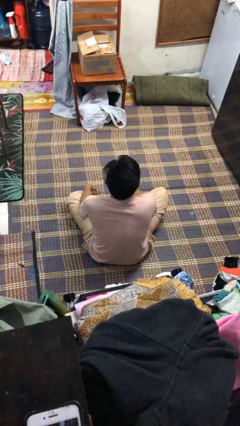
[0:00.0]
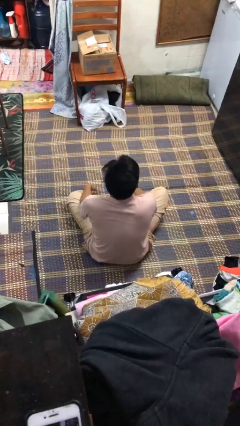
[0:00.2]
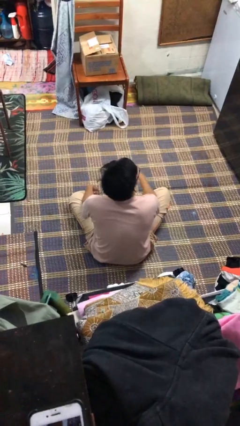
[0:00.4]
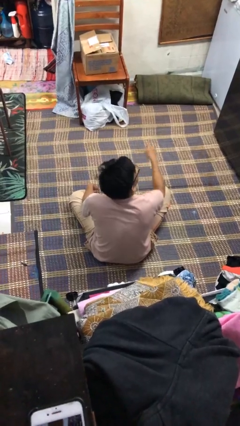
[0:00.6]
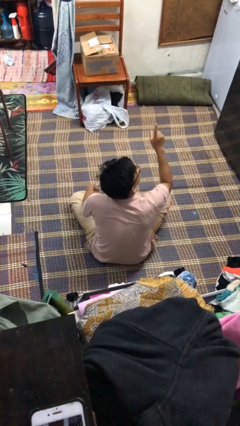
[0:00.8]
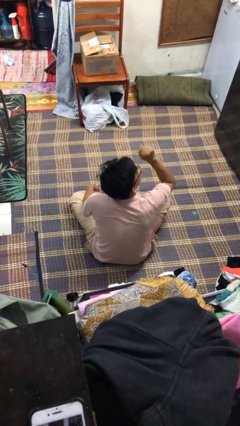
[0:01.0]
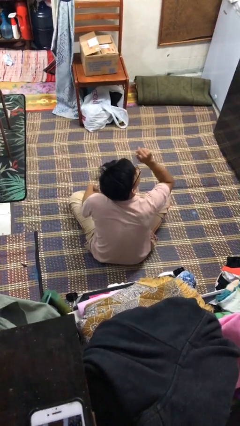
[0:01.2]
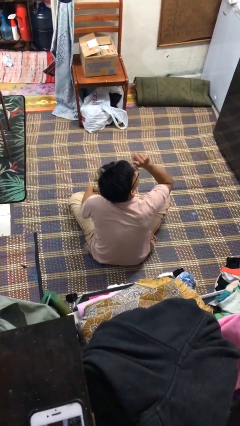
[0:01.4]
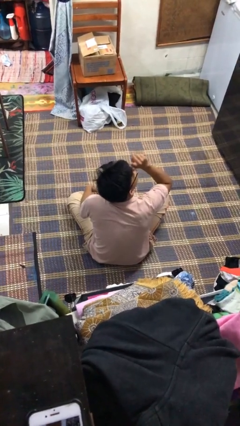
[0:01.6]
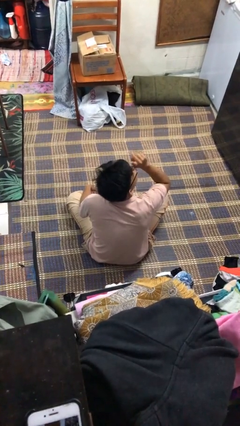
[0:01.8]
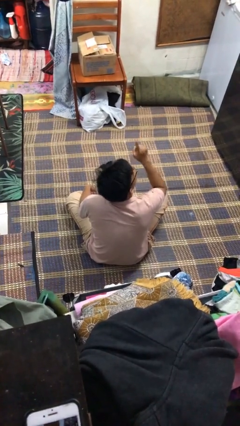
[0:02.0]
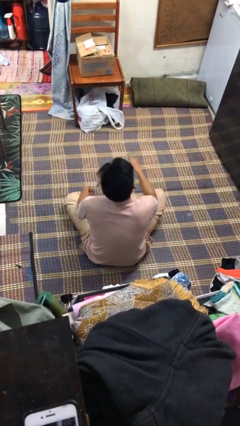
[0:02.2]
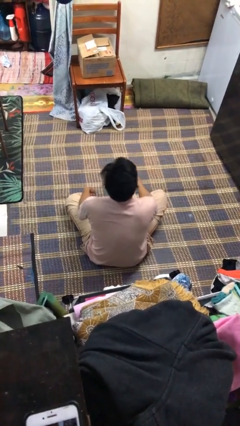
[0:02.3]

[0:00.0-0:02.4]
person gestures be quiet

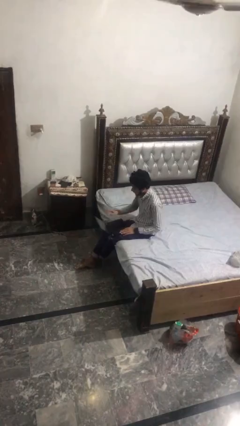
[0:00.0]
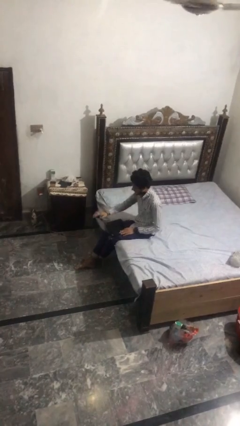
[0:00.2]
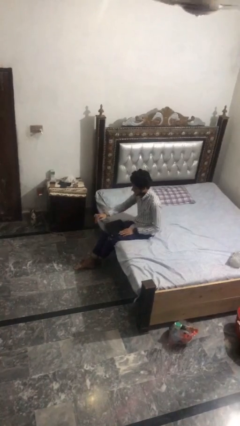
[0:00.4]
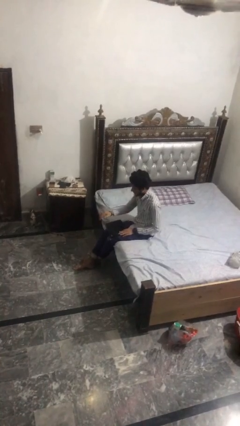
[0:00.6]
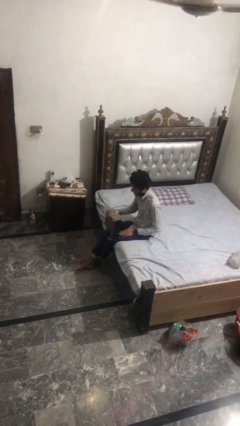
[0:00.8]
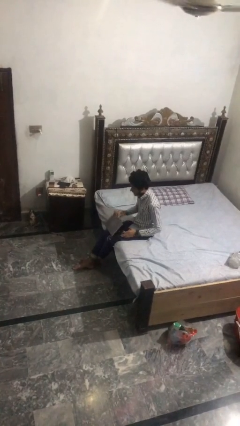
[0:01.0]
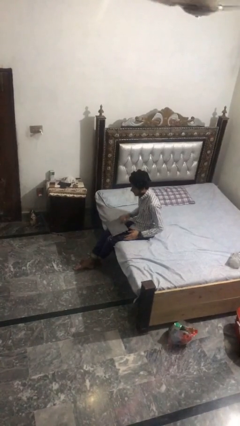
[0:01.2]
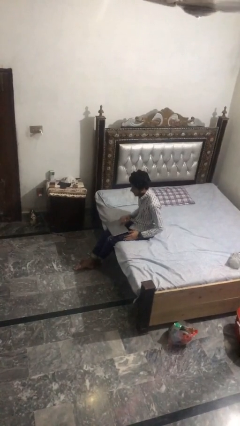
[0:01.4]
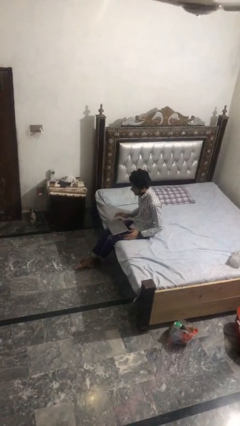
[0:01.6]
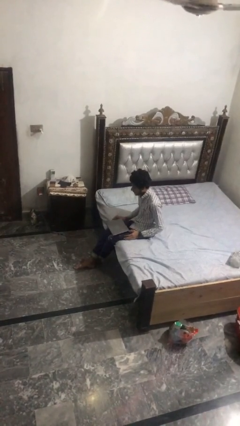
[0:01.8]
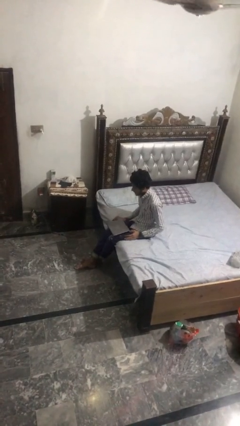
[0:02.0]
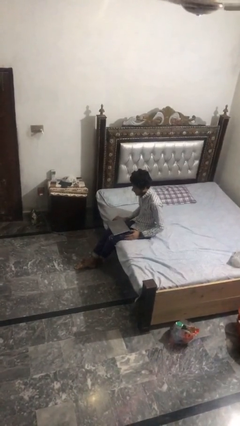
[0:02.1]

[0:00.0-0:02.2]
person closes laptop

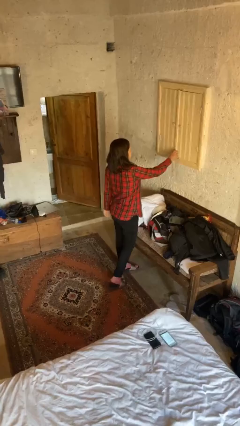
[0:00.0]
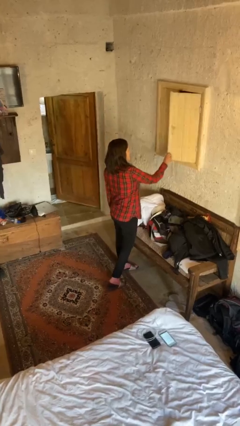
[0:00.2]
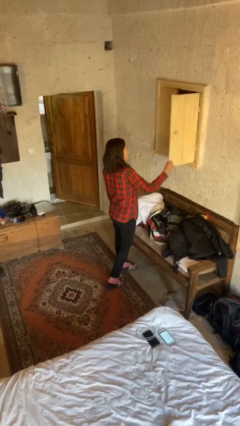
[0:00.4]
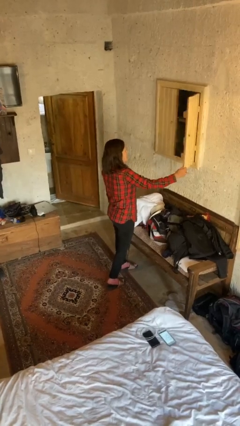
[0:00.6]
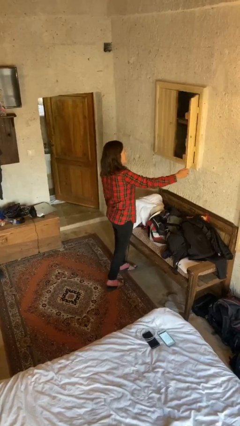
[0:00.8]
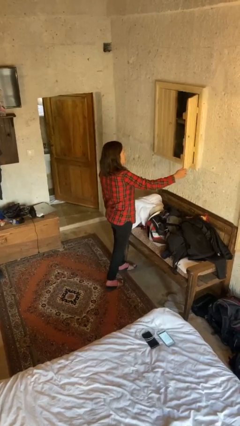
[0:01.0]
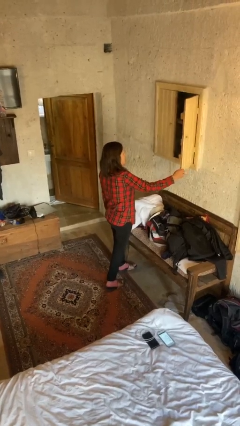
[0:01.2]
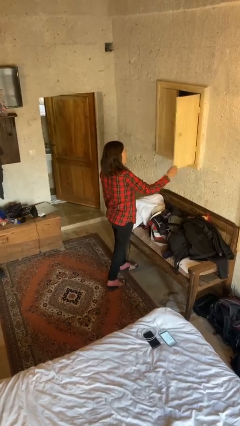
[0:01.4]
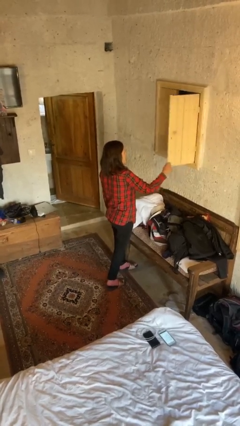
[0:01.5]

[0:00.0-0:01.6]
person opens closet door

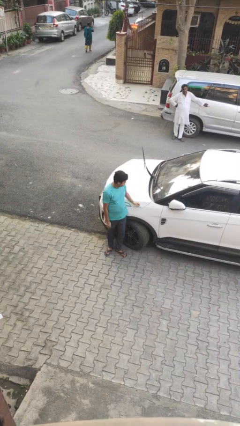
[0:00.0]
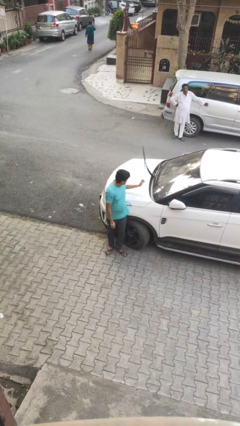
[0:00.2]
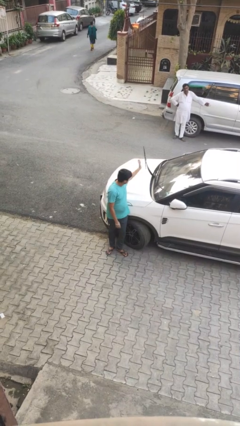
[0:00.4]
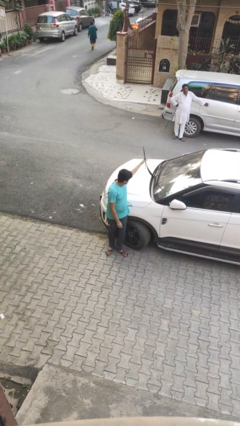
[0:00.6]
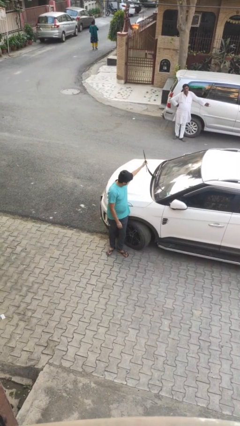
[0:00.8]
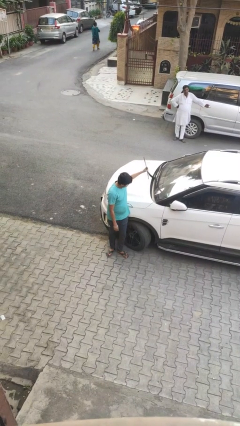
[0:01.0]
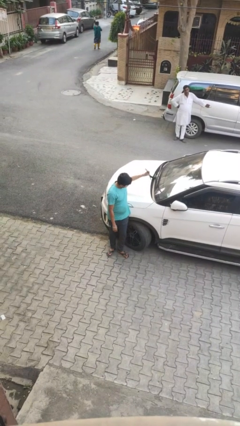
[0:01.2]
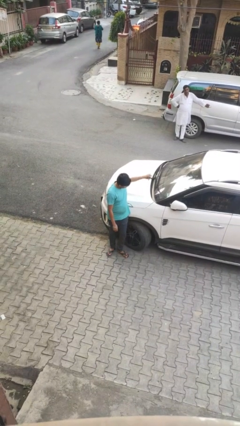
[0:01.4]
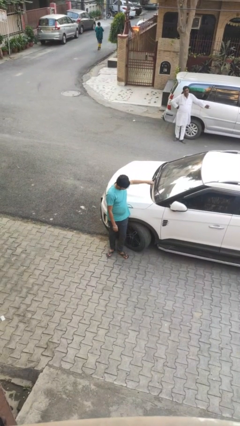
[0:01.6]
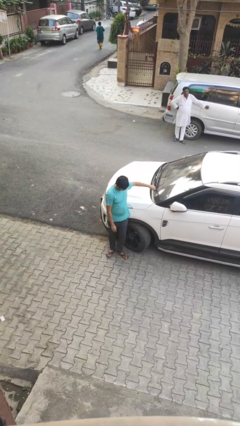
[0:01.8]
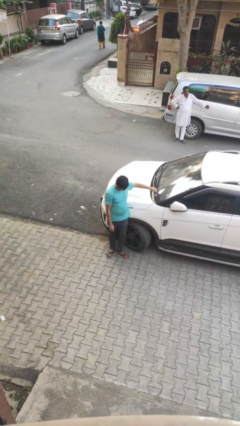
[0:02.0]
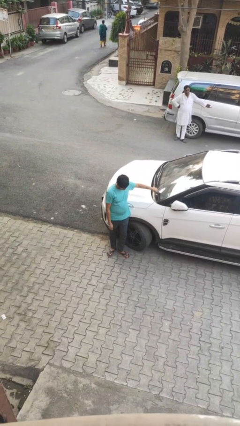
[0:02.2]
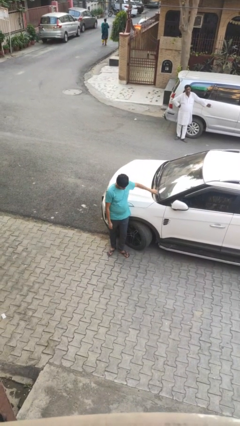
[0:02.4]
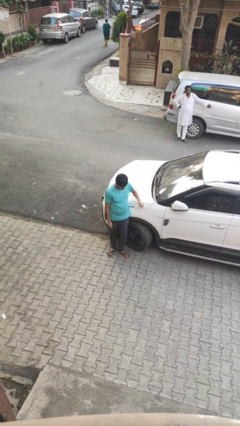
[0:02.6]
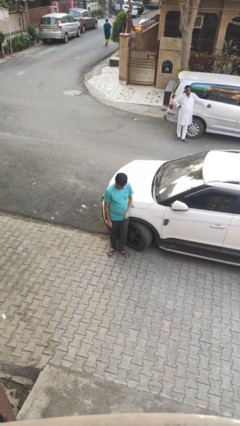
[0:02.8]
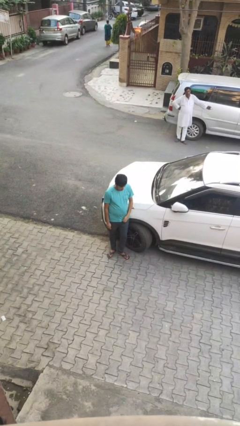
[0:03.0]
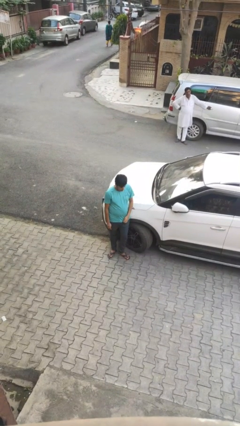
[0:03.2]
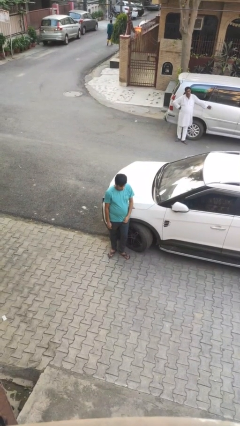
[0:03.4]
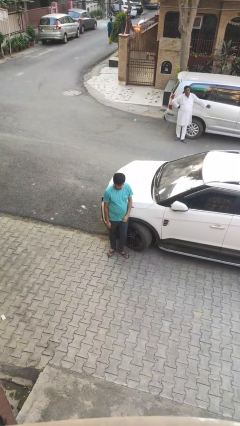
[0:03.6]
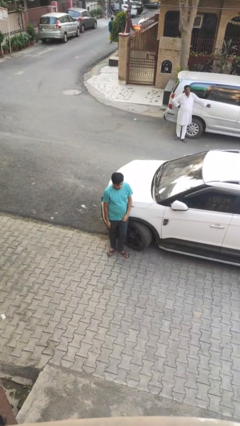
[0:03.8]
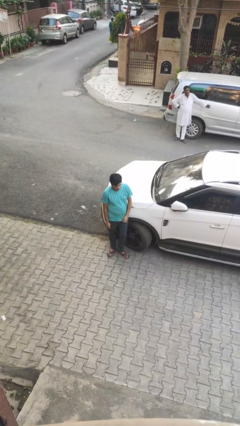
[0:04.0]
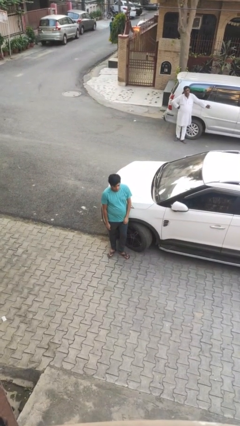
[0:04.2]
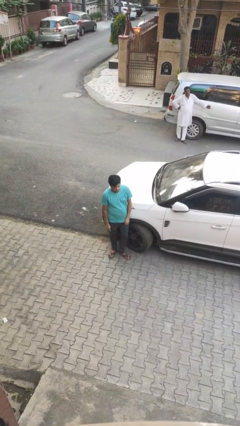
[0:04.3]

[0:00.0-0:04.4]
person flips down car wipers

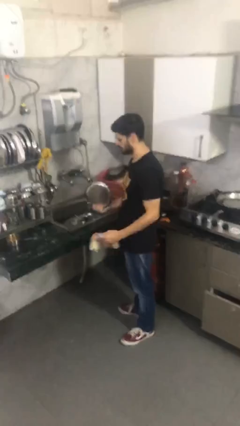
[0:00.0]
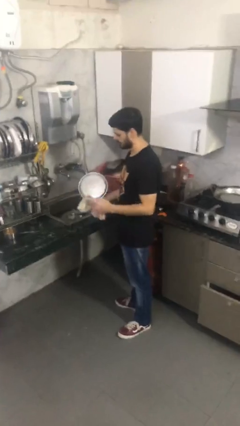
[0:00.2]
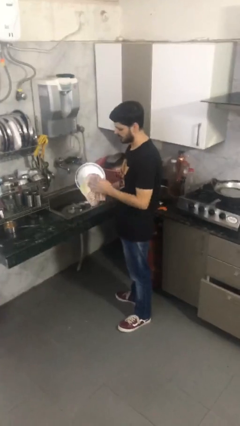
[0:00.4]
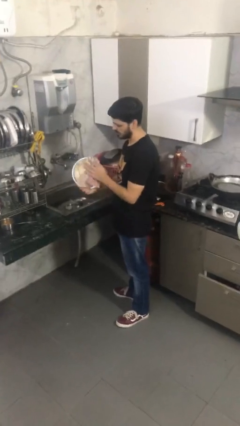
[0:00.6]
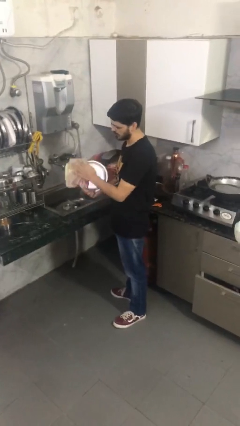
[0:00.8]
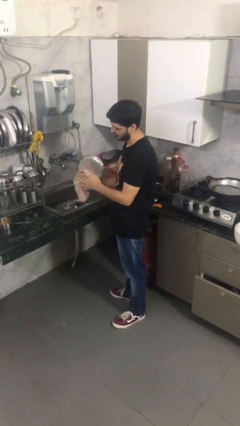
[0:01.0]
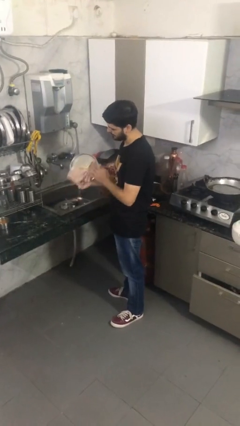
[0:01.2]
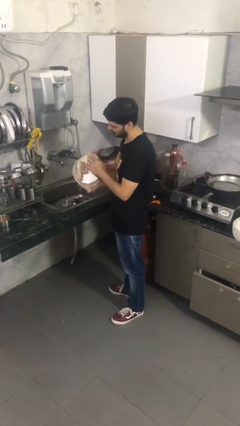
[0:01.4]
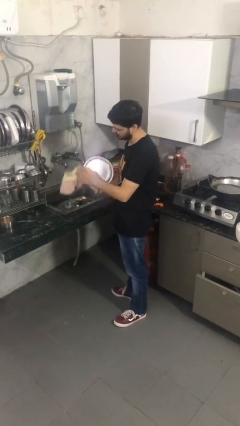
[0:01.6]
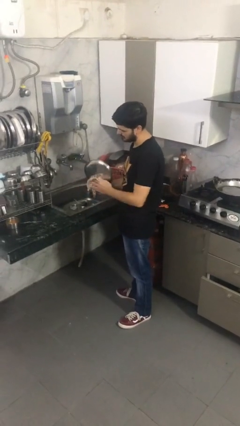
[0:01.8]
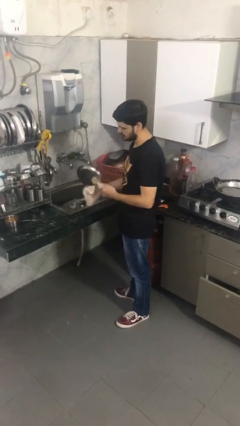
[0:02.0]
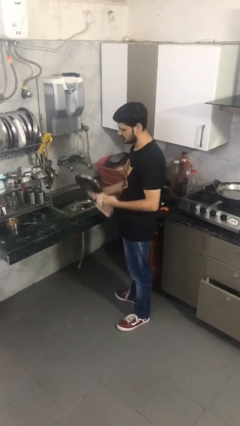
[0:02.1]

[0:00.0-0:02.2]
person dries dish

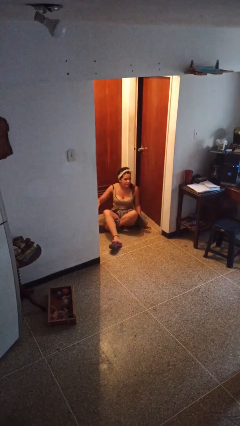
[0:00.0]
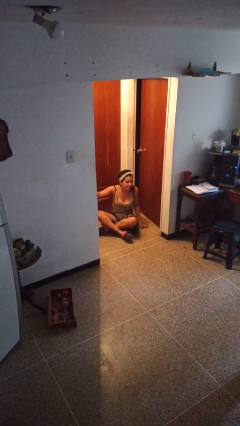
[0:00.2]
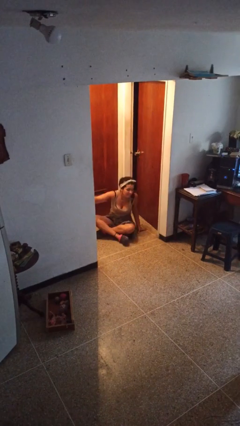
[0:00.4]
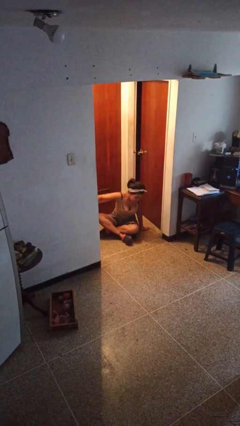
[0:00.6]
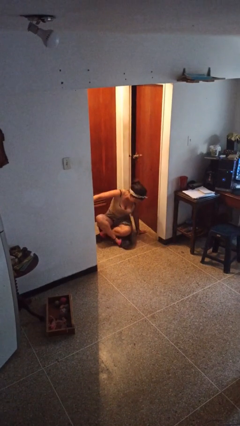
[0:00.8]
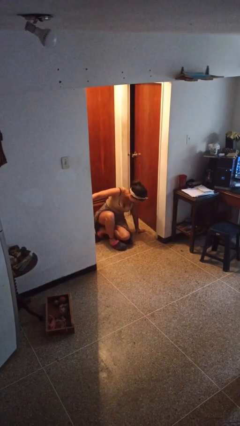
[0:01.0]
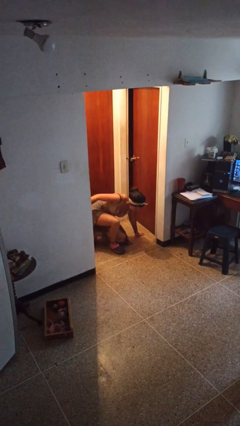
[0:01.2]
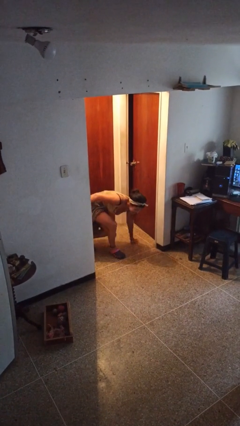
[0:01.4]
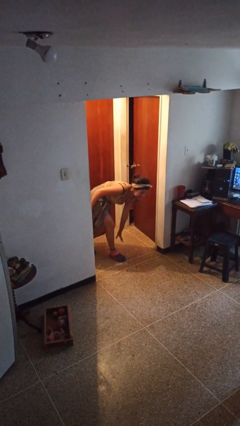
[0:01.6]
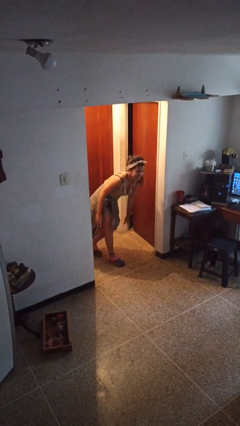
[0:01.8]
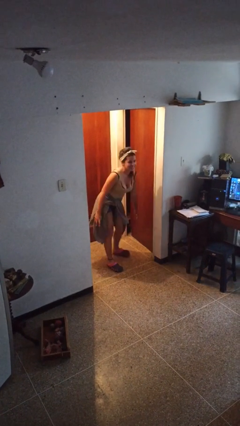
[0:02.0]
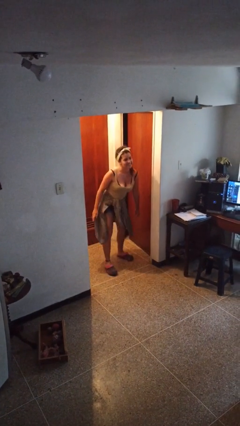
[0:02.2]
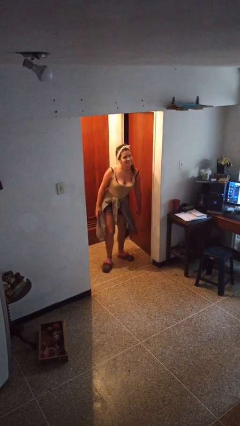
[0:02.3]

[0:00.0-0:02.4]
person stands up

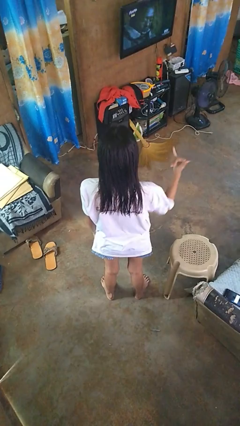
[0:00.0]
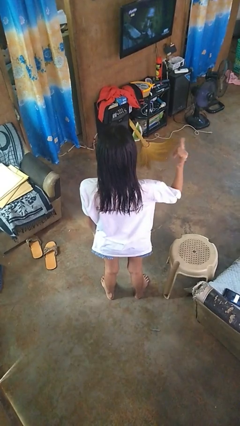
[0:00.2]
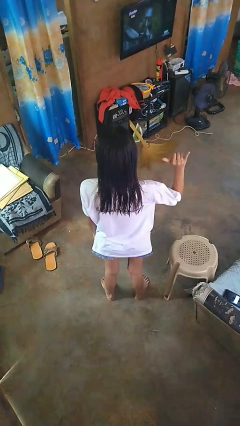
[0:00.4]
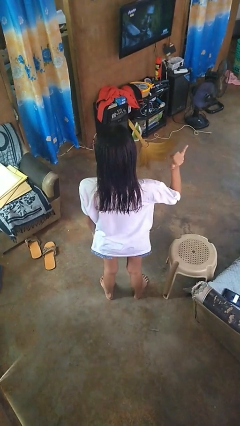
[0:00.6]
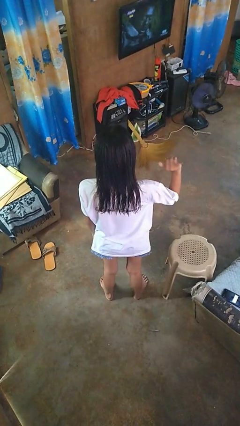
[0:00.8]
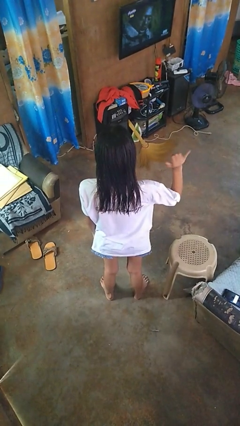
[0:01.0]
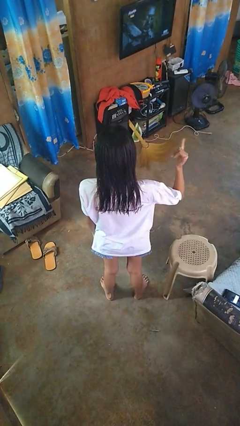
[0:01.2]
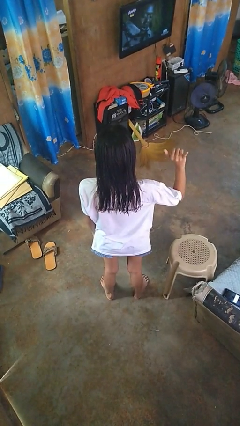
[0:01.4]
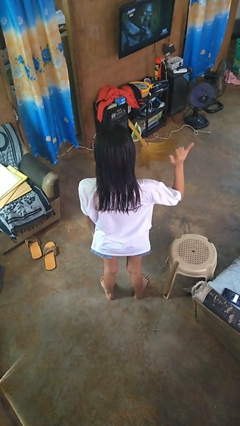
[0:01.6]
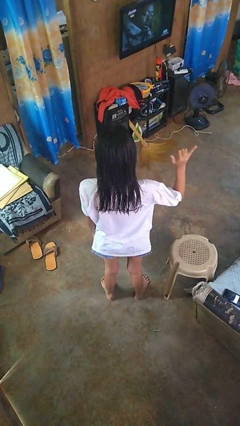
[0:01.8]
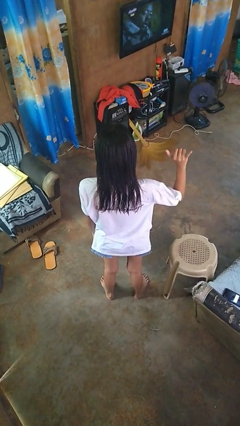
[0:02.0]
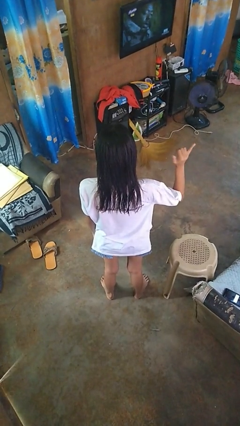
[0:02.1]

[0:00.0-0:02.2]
person gestures hang loose
